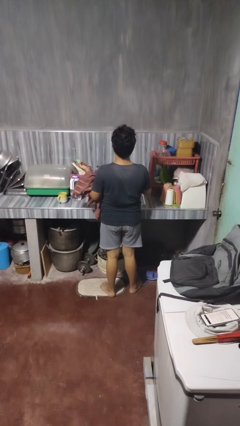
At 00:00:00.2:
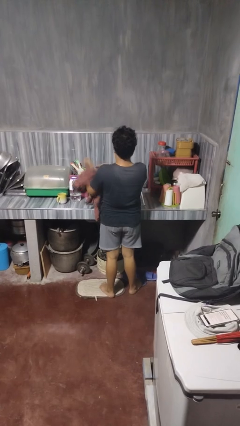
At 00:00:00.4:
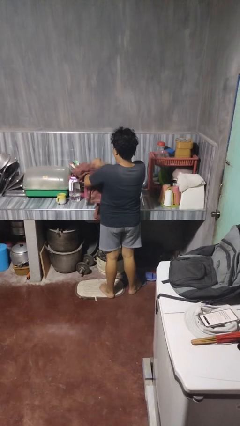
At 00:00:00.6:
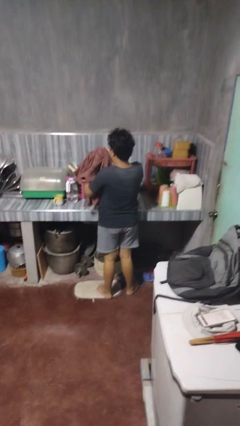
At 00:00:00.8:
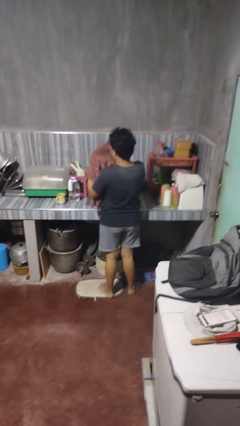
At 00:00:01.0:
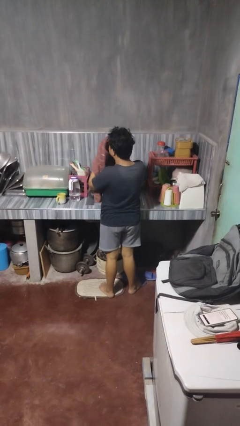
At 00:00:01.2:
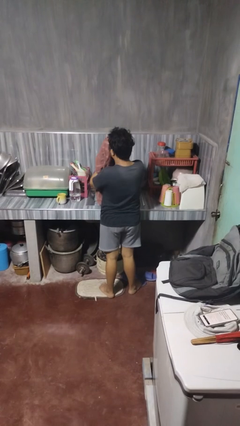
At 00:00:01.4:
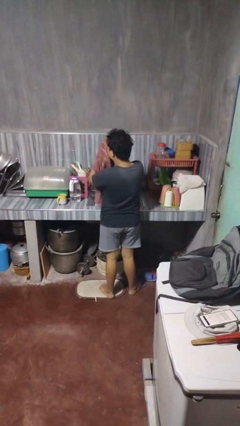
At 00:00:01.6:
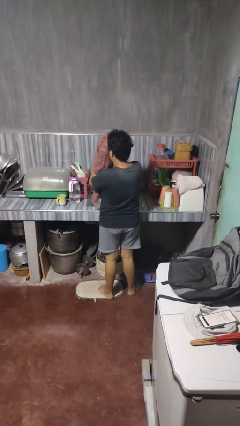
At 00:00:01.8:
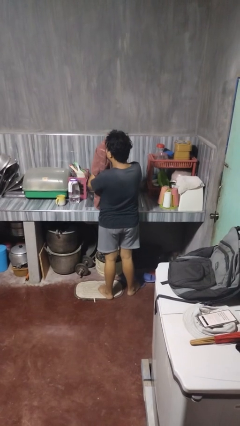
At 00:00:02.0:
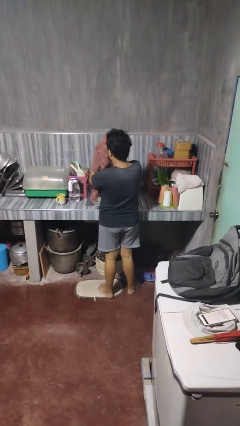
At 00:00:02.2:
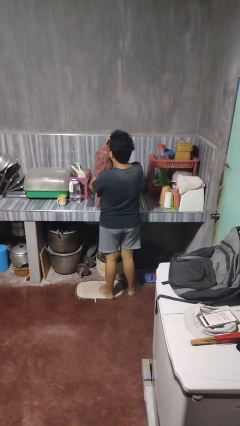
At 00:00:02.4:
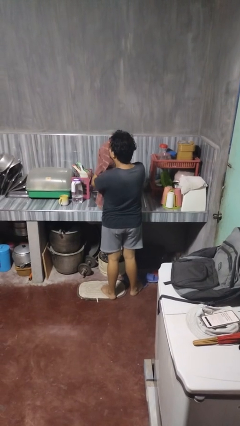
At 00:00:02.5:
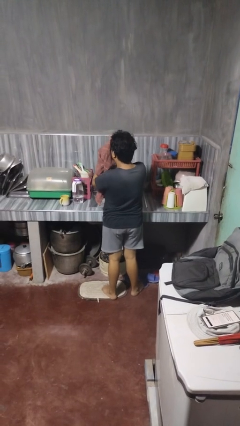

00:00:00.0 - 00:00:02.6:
person dries face with towel

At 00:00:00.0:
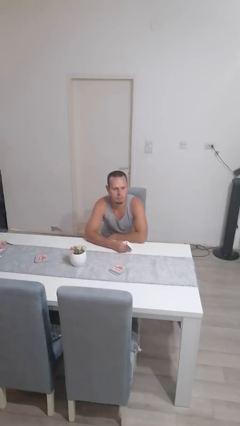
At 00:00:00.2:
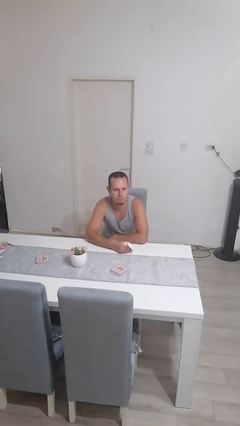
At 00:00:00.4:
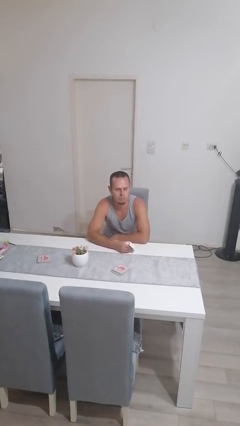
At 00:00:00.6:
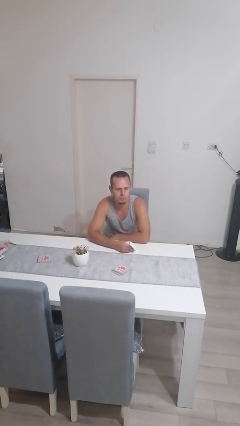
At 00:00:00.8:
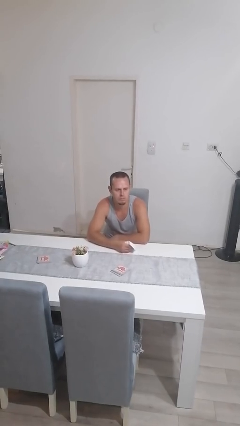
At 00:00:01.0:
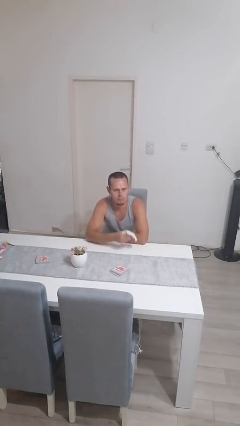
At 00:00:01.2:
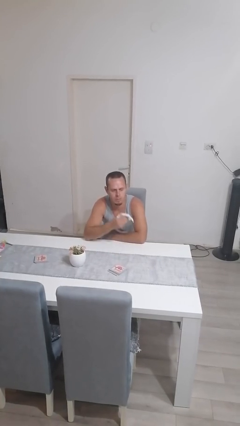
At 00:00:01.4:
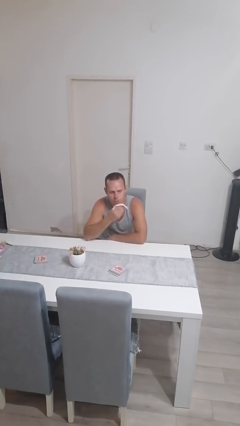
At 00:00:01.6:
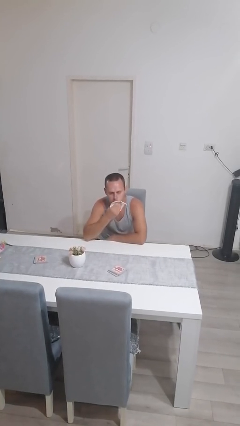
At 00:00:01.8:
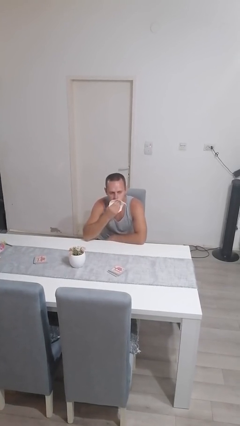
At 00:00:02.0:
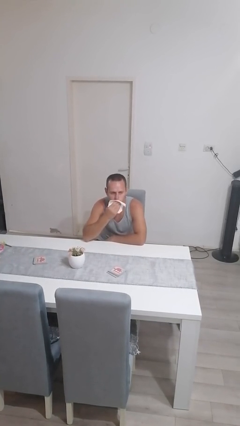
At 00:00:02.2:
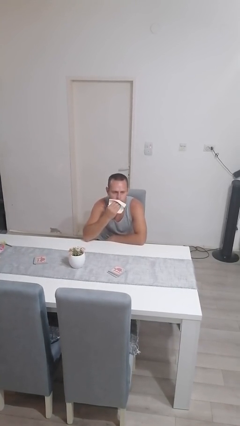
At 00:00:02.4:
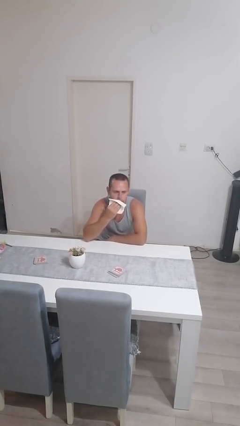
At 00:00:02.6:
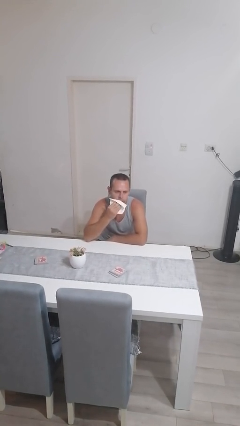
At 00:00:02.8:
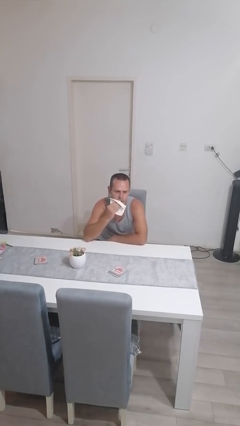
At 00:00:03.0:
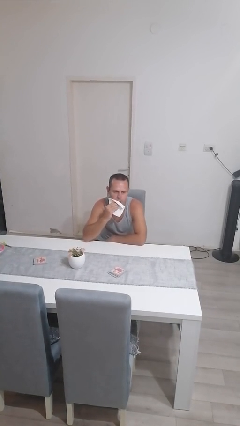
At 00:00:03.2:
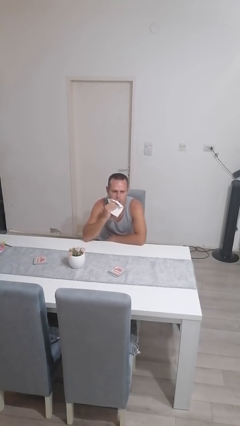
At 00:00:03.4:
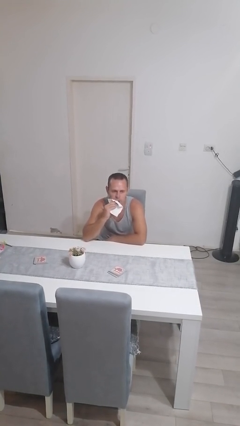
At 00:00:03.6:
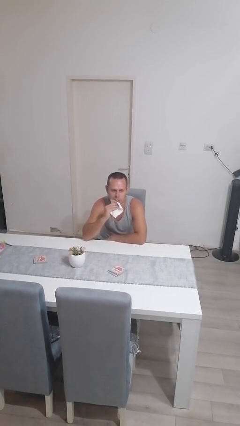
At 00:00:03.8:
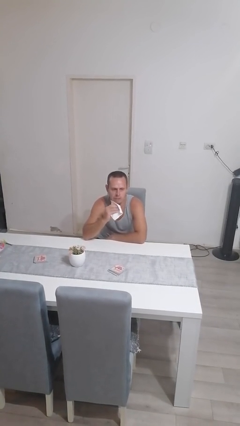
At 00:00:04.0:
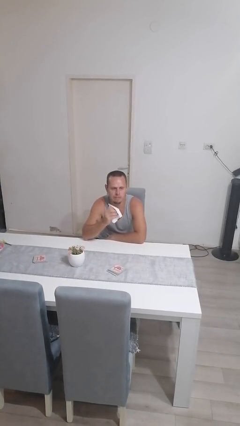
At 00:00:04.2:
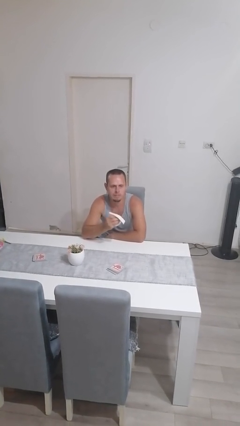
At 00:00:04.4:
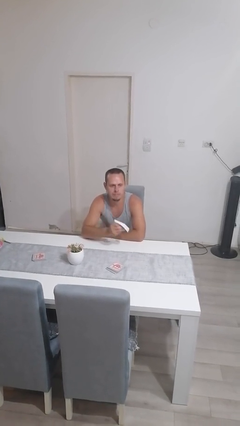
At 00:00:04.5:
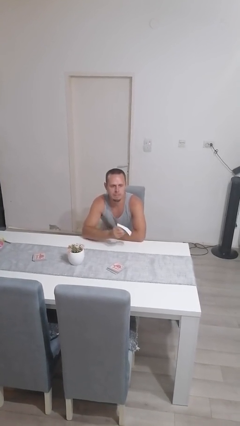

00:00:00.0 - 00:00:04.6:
person wipes mouth with napkin

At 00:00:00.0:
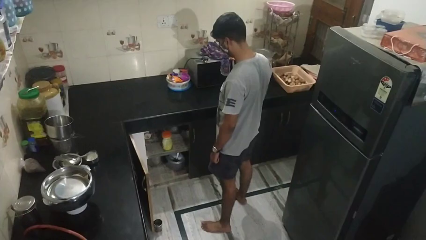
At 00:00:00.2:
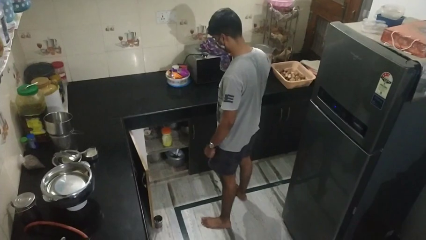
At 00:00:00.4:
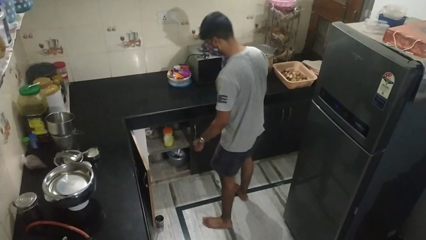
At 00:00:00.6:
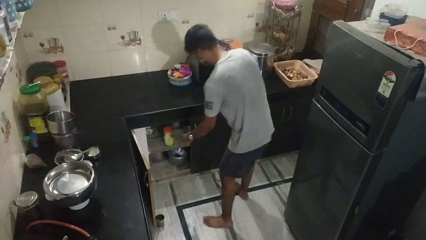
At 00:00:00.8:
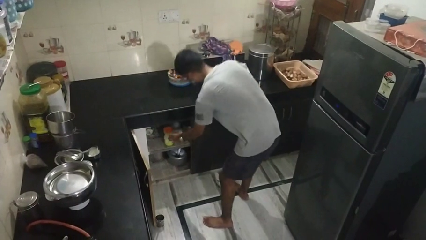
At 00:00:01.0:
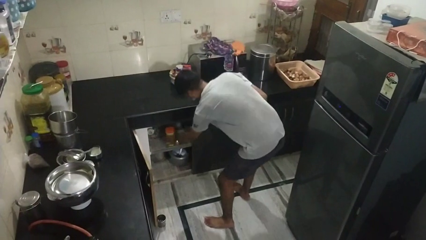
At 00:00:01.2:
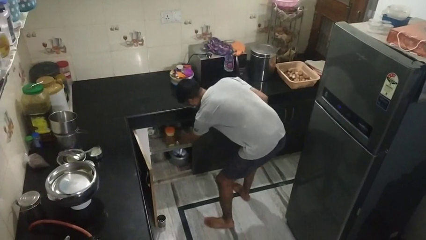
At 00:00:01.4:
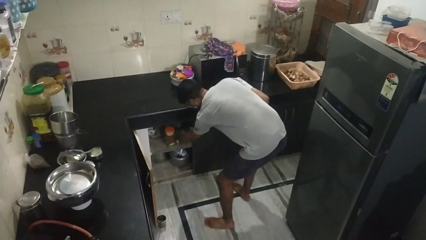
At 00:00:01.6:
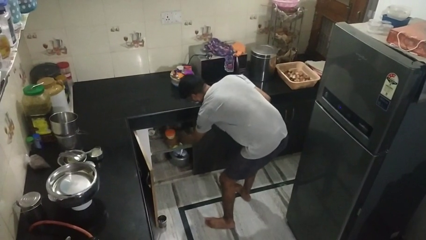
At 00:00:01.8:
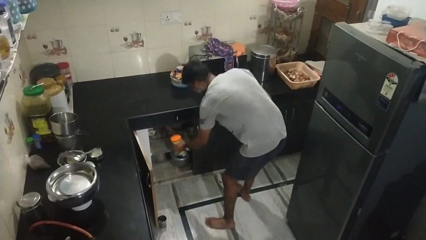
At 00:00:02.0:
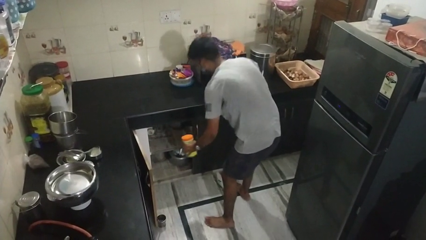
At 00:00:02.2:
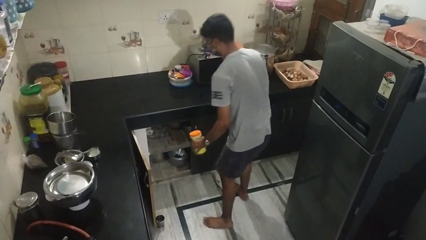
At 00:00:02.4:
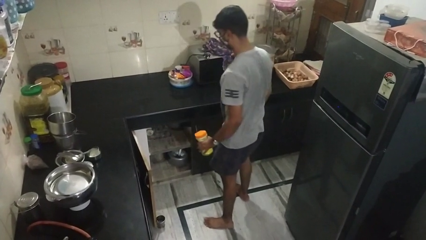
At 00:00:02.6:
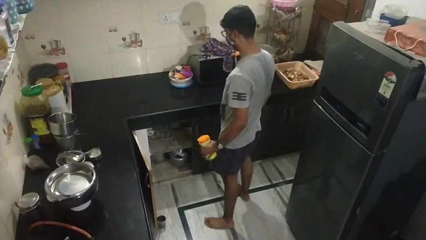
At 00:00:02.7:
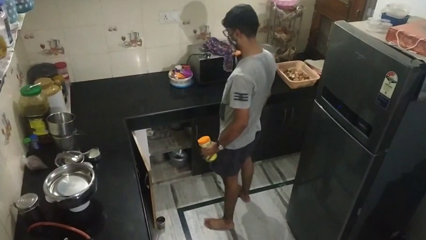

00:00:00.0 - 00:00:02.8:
person picks up object from cabinet

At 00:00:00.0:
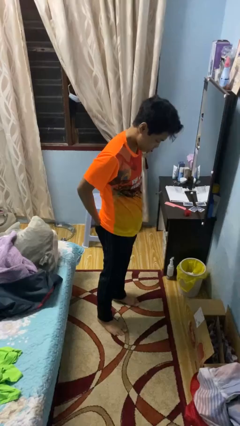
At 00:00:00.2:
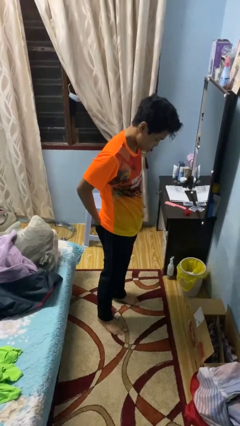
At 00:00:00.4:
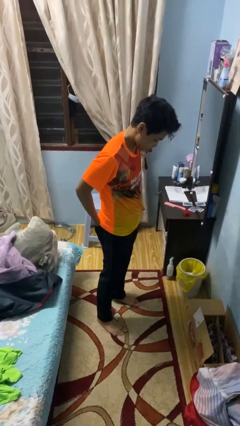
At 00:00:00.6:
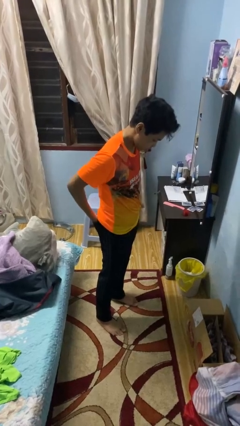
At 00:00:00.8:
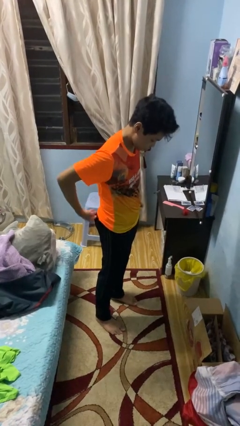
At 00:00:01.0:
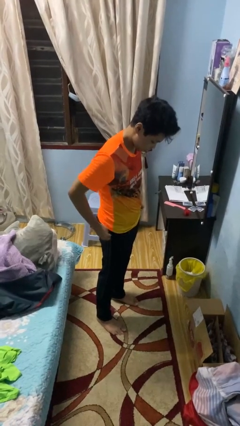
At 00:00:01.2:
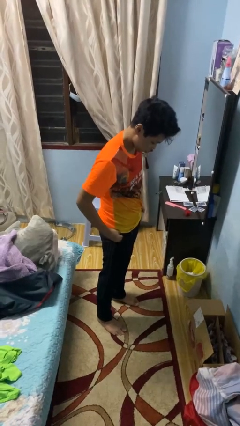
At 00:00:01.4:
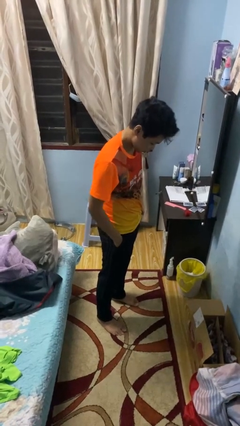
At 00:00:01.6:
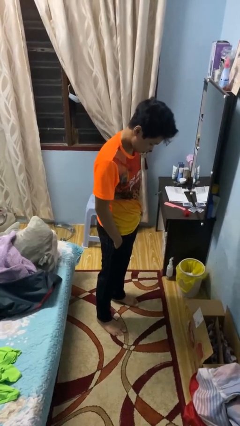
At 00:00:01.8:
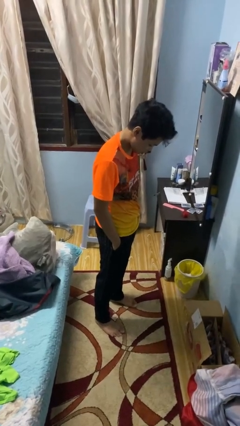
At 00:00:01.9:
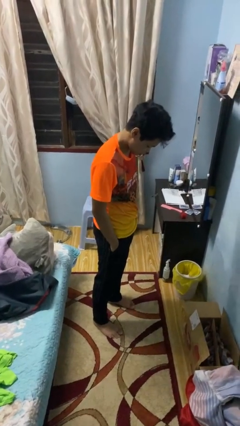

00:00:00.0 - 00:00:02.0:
person puts hands in back pockets

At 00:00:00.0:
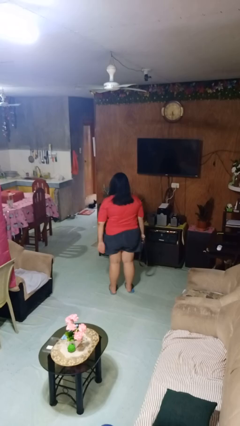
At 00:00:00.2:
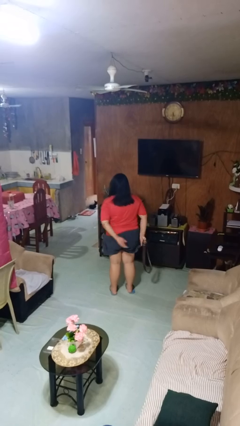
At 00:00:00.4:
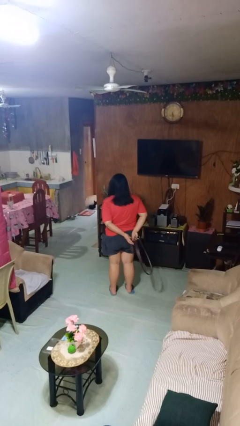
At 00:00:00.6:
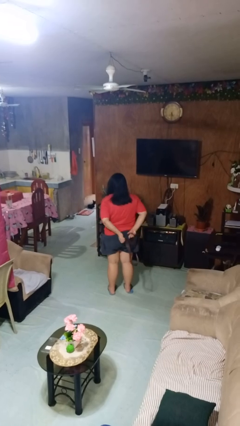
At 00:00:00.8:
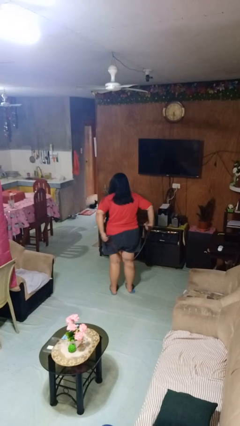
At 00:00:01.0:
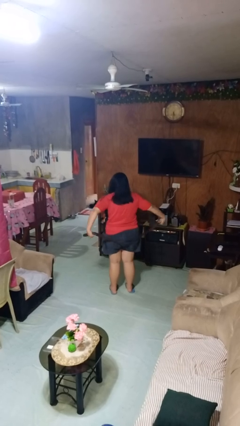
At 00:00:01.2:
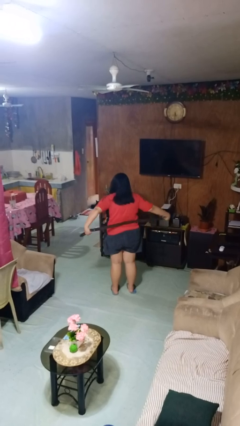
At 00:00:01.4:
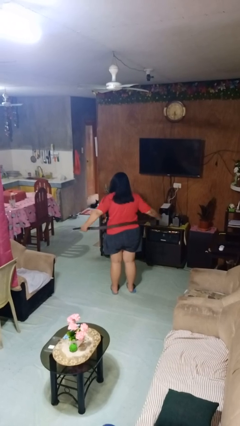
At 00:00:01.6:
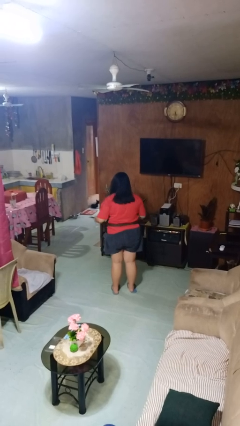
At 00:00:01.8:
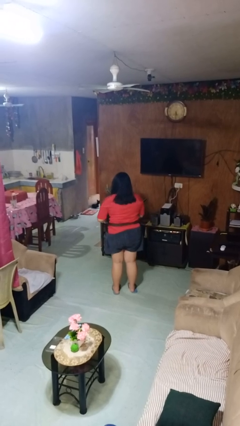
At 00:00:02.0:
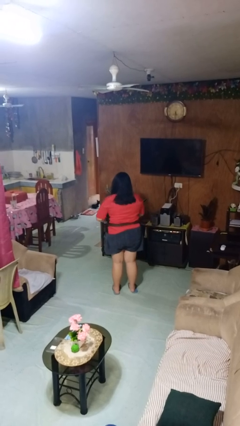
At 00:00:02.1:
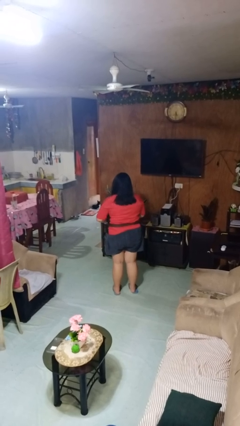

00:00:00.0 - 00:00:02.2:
person puts on belt

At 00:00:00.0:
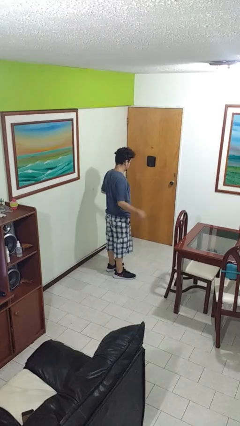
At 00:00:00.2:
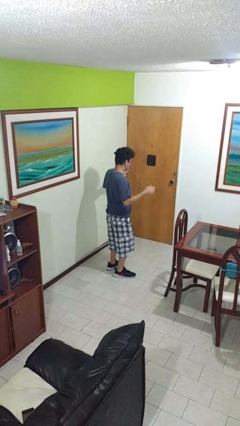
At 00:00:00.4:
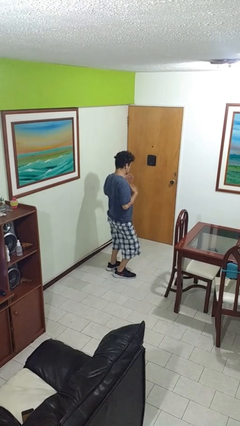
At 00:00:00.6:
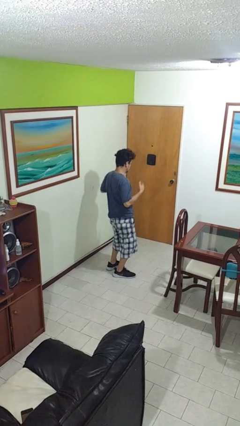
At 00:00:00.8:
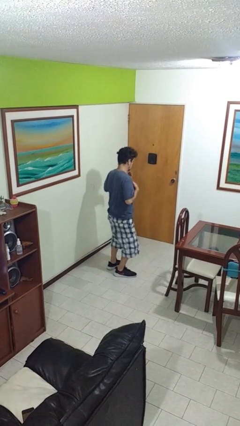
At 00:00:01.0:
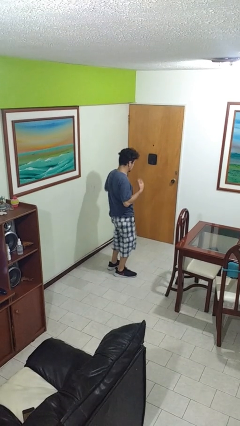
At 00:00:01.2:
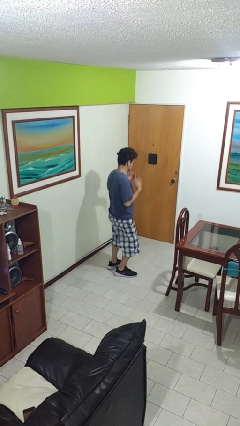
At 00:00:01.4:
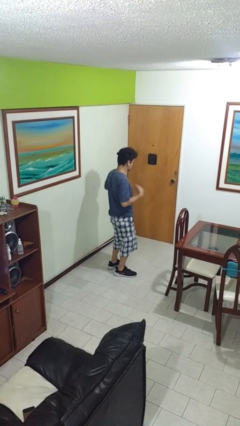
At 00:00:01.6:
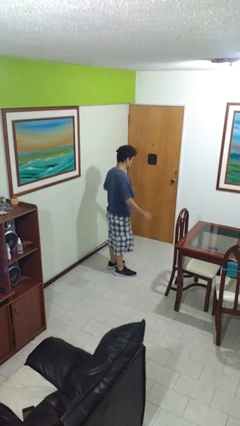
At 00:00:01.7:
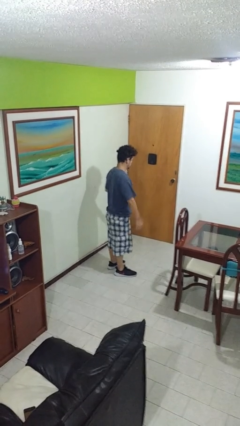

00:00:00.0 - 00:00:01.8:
person drums on chest

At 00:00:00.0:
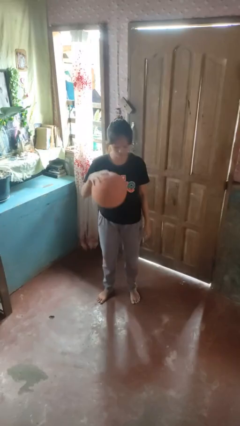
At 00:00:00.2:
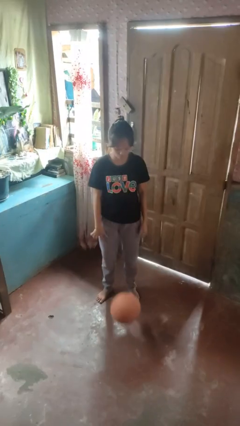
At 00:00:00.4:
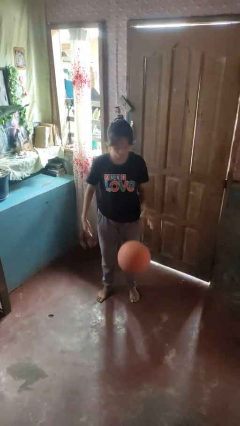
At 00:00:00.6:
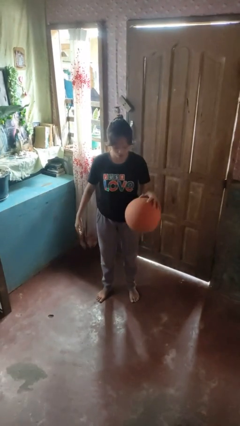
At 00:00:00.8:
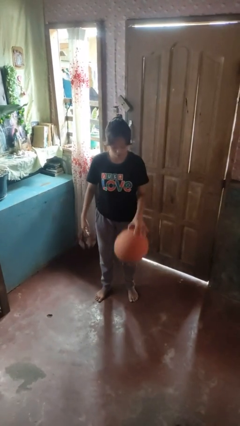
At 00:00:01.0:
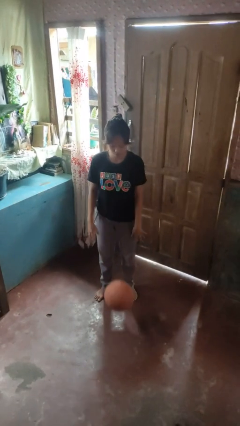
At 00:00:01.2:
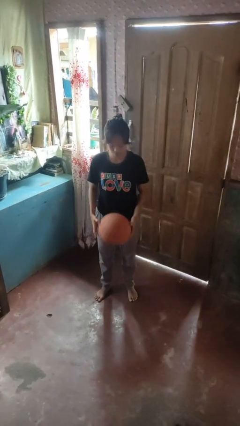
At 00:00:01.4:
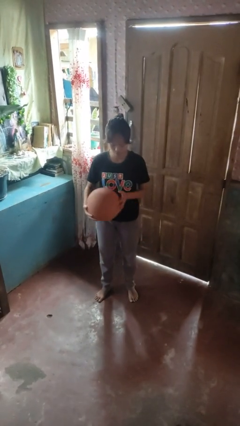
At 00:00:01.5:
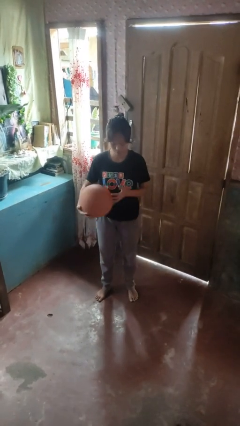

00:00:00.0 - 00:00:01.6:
person bounces ball on floor
